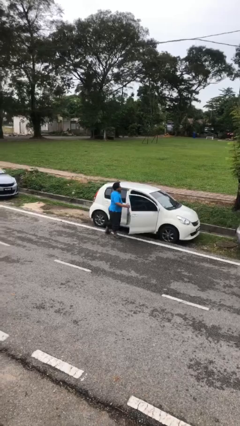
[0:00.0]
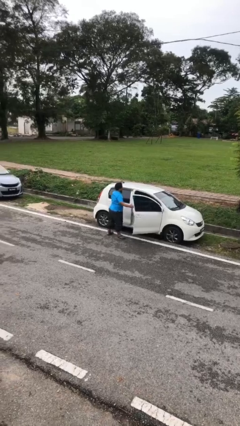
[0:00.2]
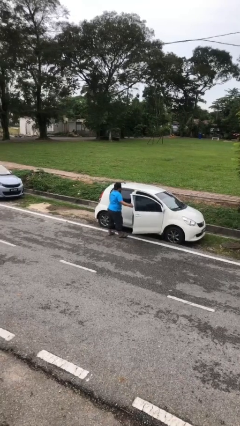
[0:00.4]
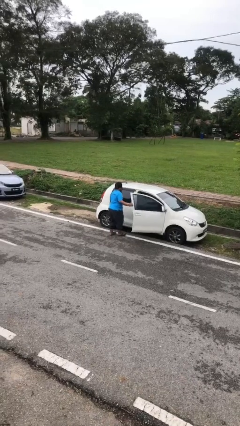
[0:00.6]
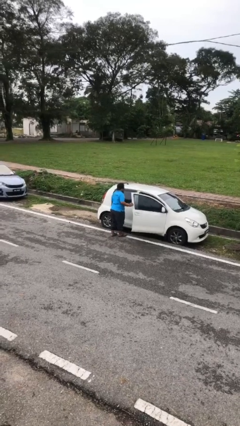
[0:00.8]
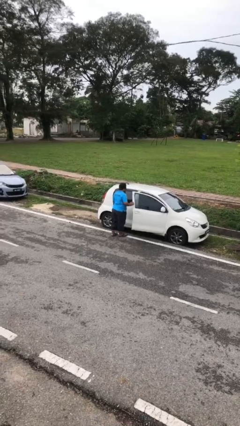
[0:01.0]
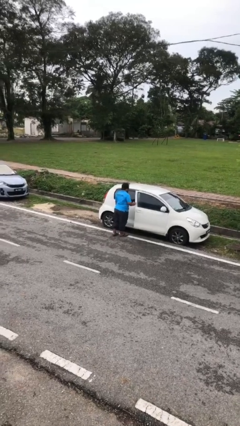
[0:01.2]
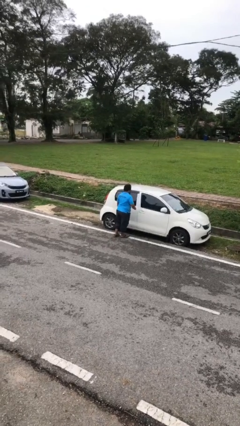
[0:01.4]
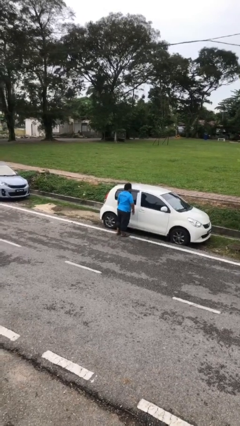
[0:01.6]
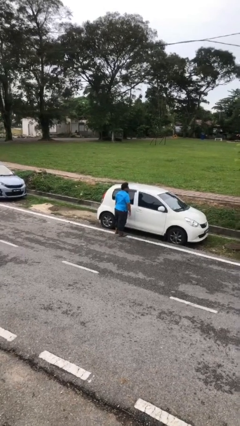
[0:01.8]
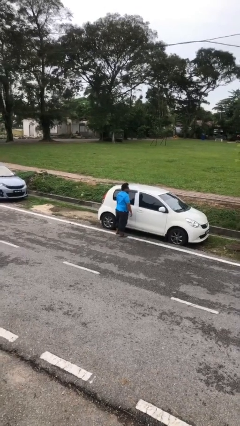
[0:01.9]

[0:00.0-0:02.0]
person closes car door

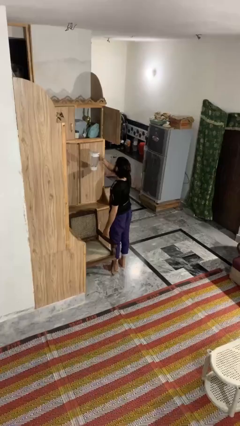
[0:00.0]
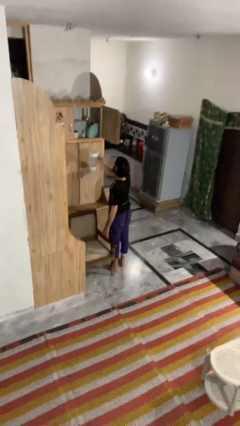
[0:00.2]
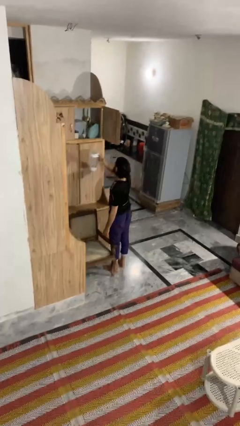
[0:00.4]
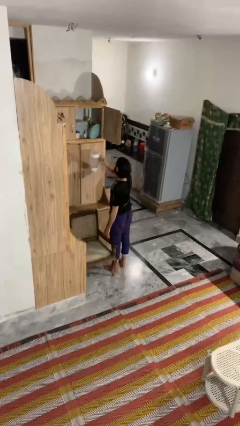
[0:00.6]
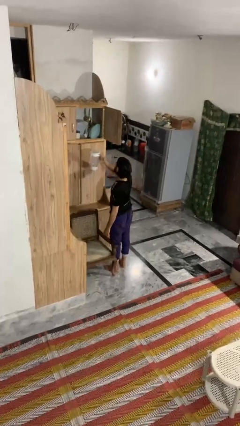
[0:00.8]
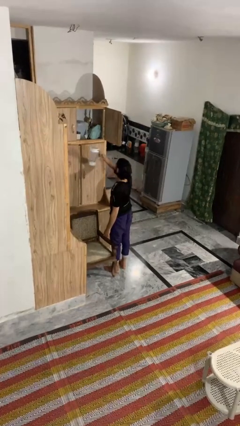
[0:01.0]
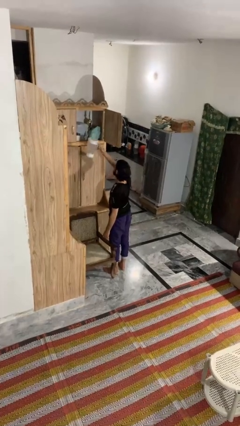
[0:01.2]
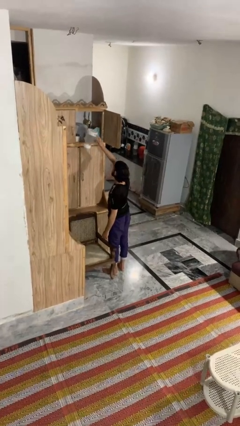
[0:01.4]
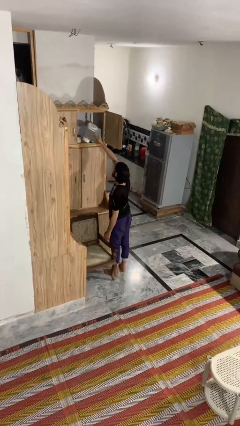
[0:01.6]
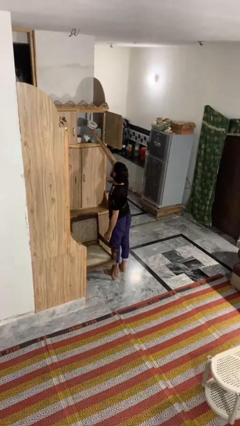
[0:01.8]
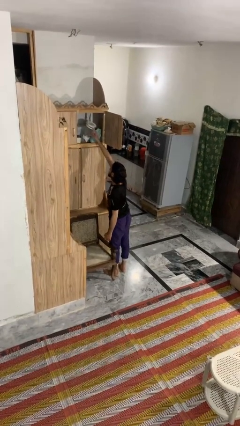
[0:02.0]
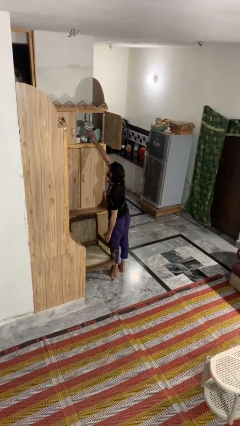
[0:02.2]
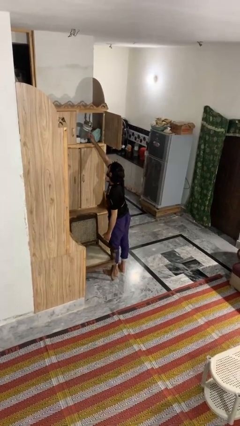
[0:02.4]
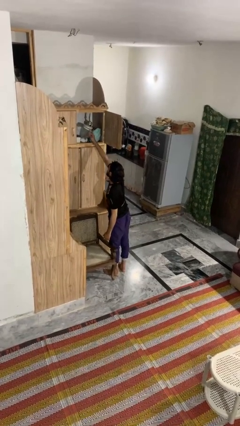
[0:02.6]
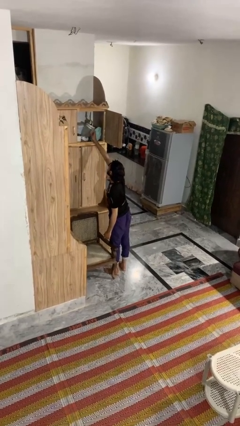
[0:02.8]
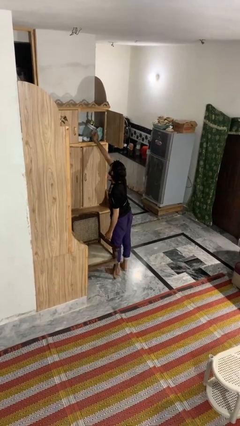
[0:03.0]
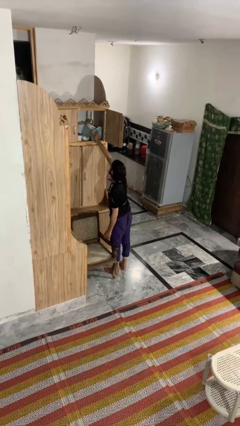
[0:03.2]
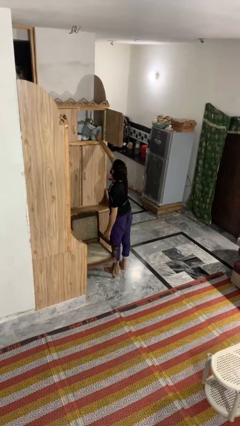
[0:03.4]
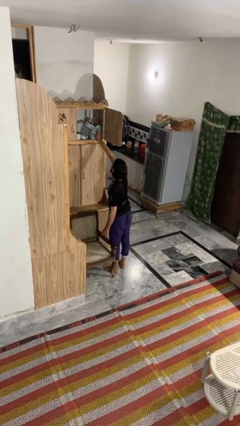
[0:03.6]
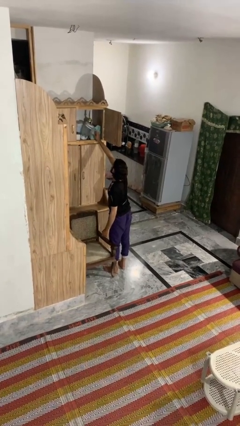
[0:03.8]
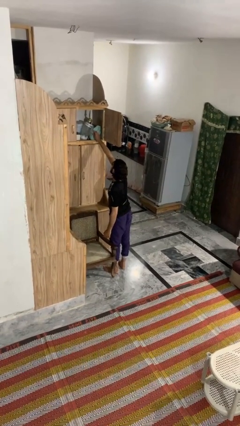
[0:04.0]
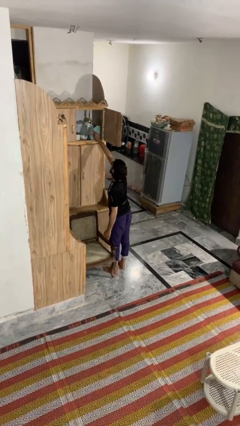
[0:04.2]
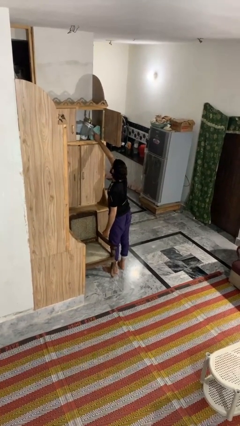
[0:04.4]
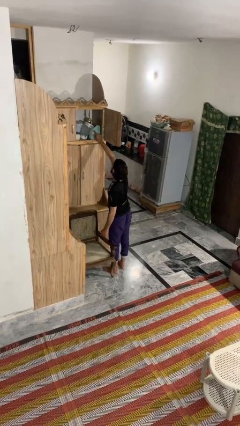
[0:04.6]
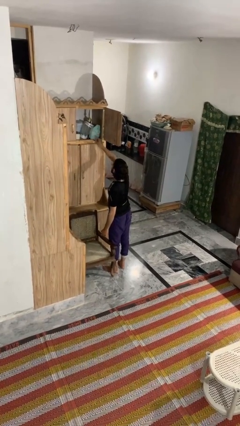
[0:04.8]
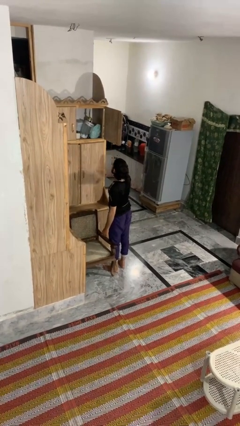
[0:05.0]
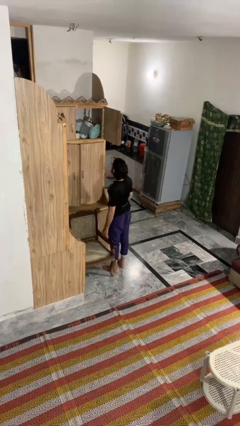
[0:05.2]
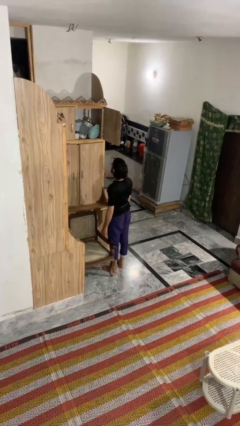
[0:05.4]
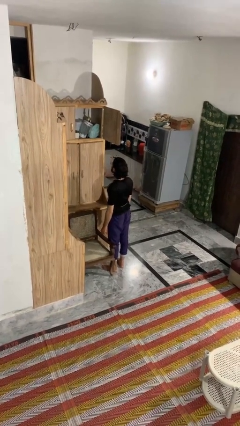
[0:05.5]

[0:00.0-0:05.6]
person puts down object on shelf

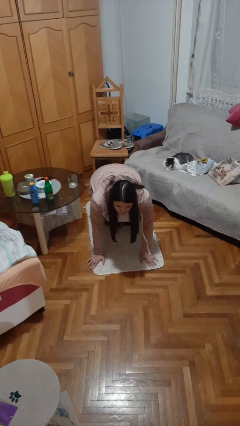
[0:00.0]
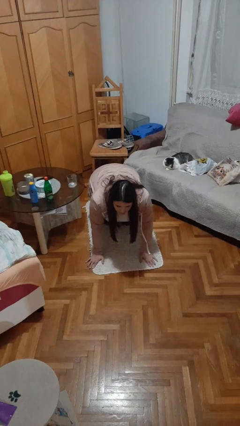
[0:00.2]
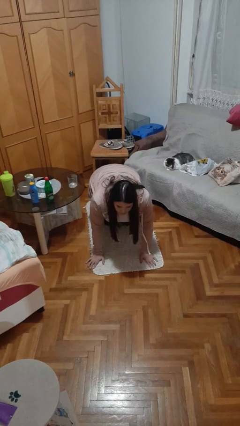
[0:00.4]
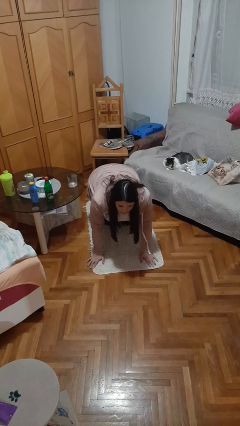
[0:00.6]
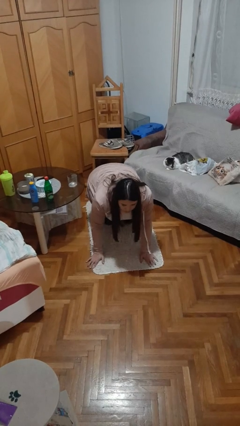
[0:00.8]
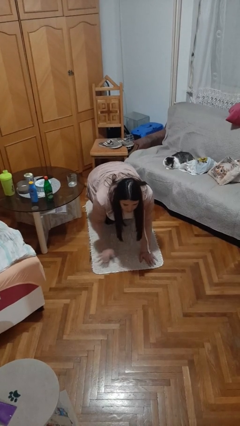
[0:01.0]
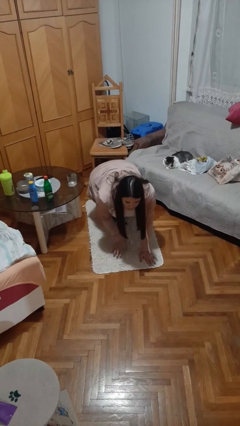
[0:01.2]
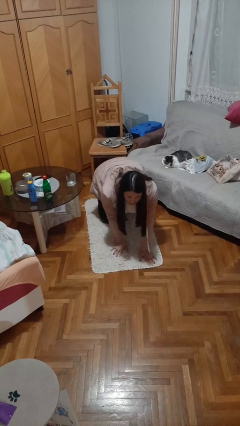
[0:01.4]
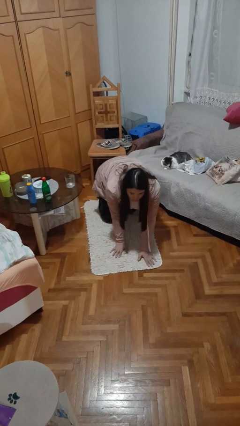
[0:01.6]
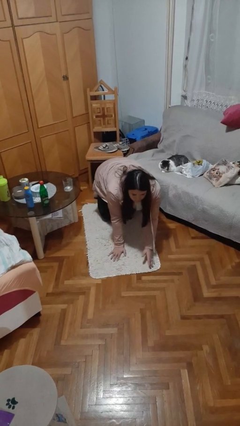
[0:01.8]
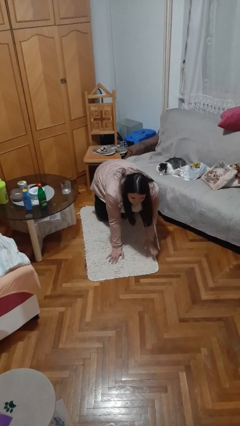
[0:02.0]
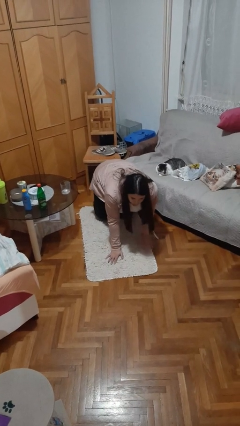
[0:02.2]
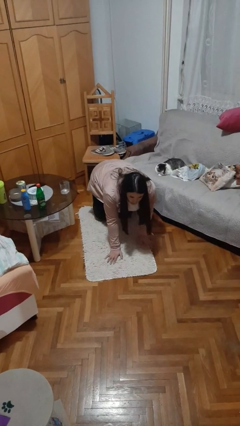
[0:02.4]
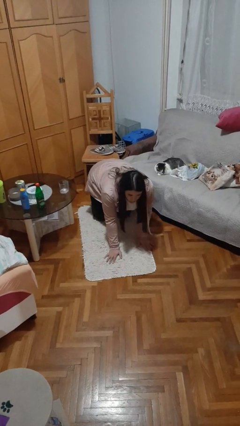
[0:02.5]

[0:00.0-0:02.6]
person crawls

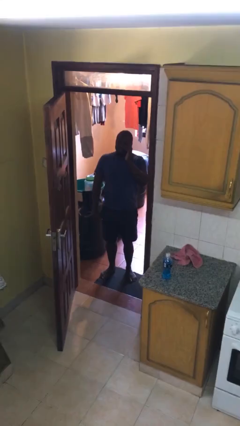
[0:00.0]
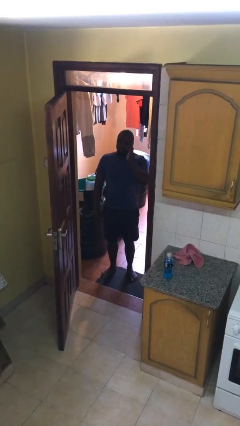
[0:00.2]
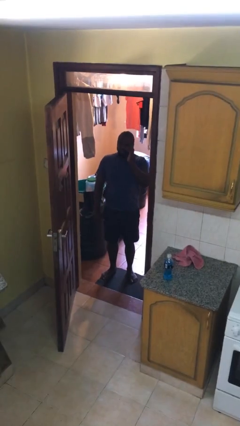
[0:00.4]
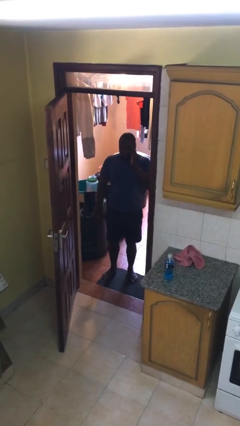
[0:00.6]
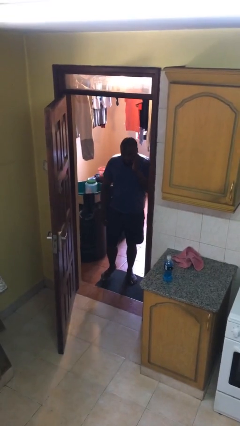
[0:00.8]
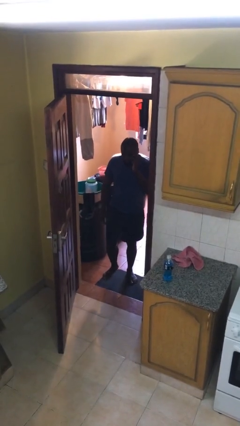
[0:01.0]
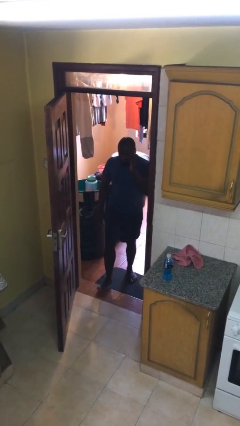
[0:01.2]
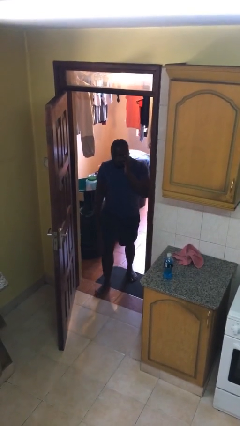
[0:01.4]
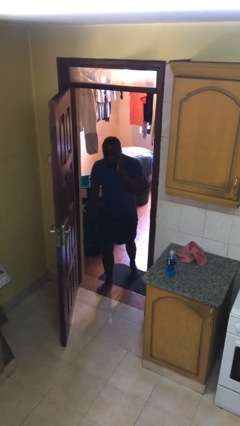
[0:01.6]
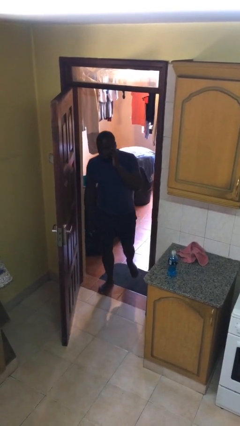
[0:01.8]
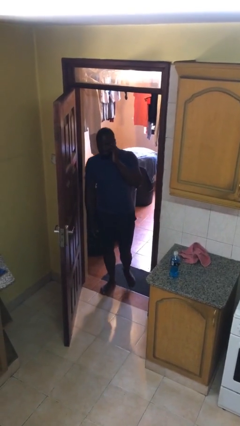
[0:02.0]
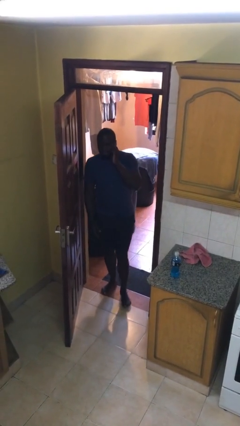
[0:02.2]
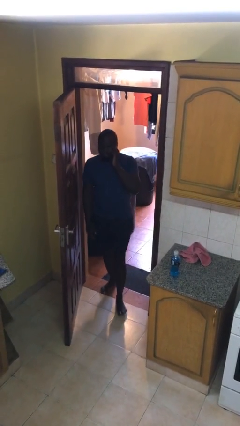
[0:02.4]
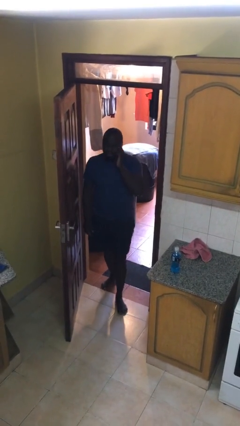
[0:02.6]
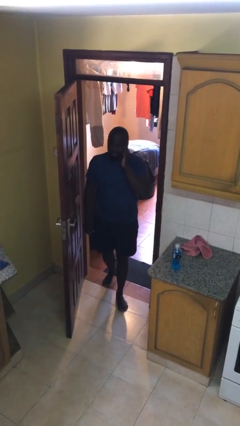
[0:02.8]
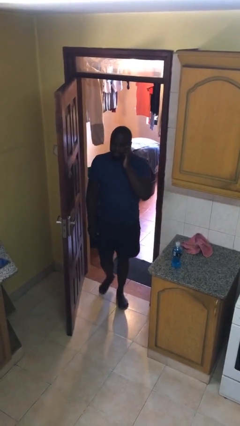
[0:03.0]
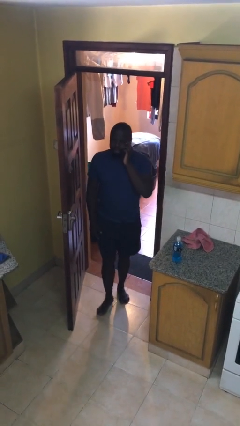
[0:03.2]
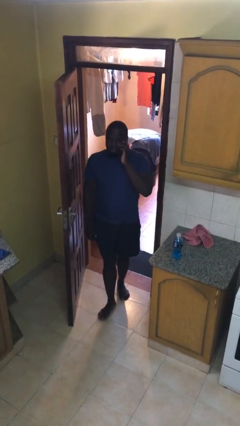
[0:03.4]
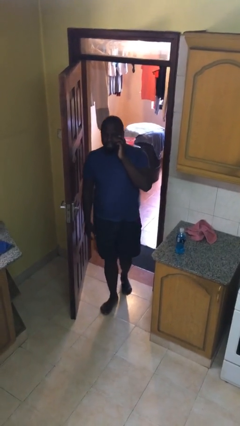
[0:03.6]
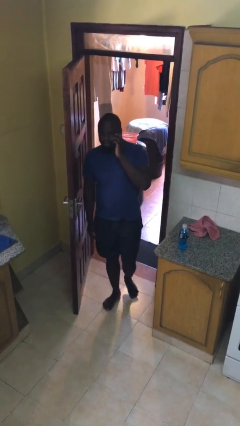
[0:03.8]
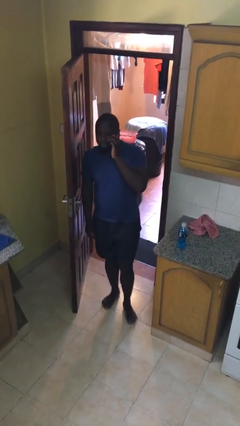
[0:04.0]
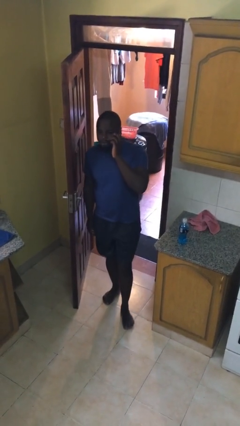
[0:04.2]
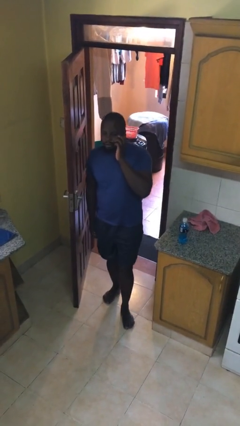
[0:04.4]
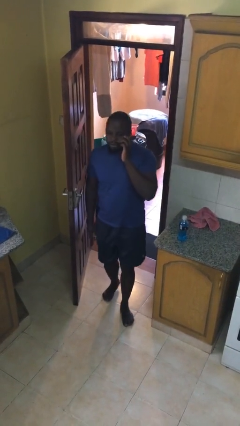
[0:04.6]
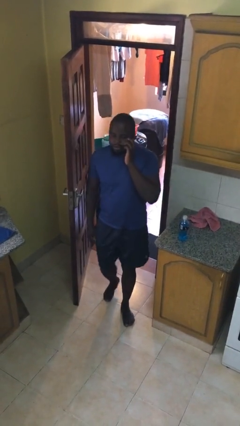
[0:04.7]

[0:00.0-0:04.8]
person enters scene through structure

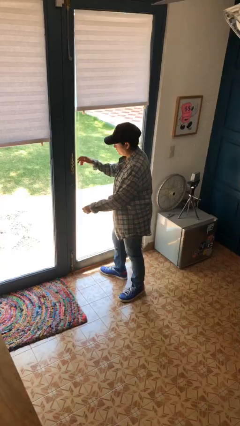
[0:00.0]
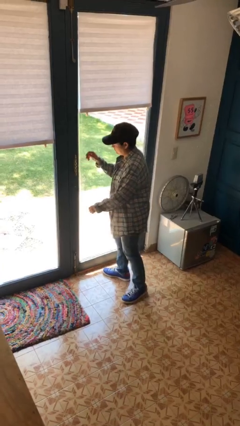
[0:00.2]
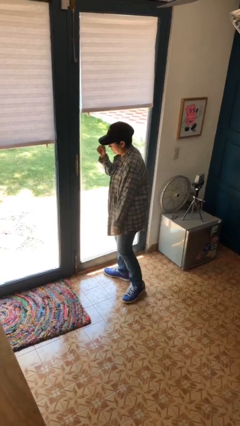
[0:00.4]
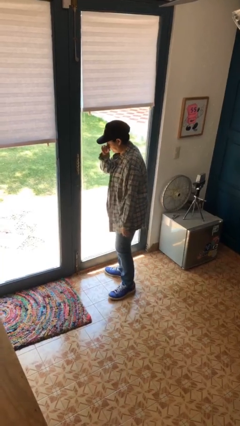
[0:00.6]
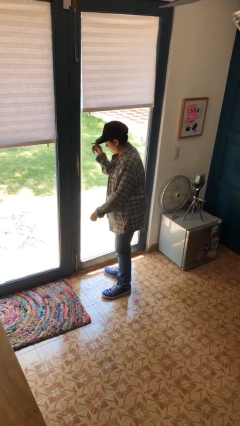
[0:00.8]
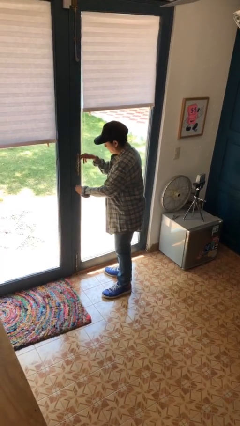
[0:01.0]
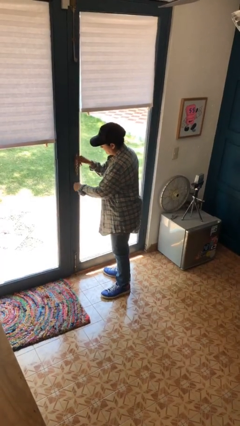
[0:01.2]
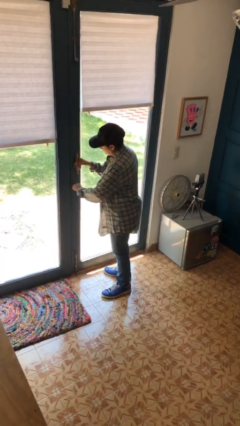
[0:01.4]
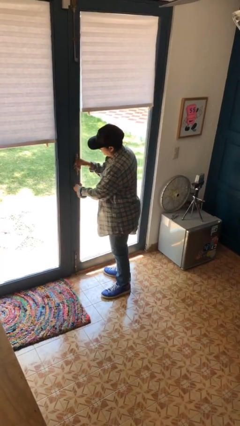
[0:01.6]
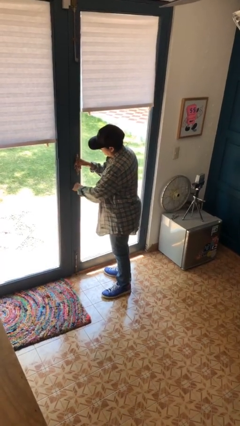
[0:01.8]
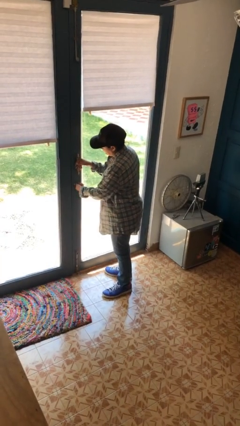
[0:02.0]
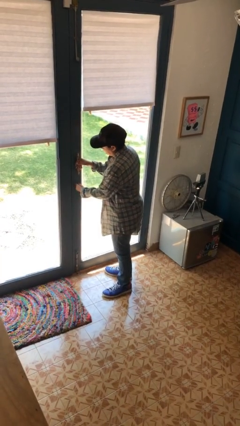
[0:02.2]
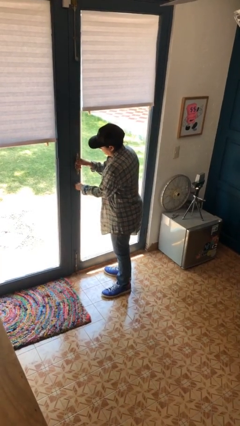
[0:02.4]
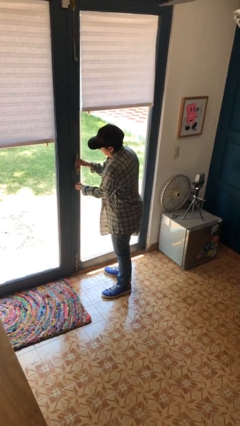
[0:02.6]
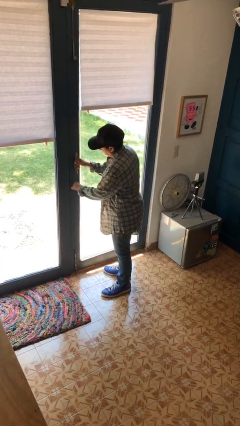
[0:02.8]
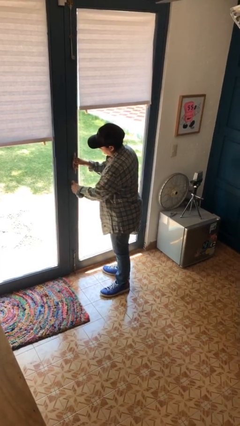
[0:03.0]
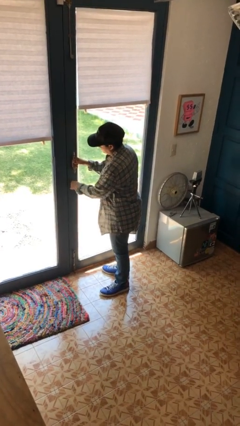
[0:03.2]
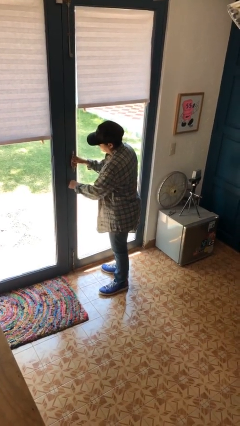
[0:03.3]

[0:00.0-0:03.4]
person unlocks door with keys
